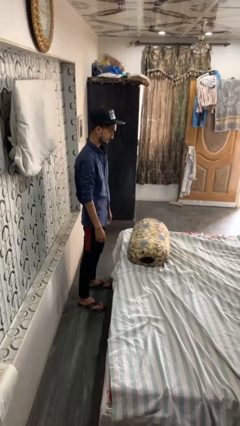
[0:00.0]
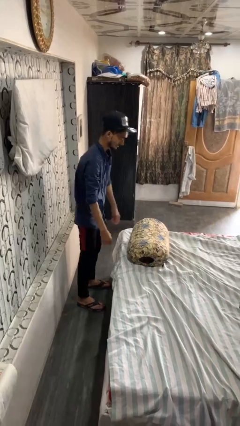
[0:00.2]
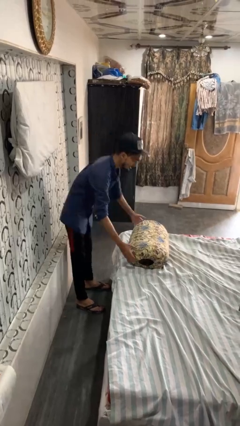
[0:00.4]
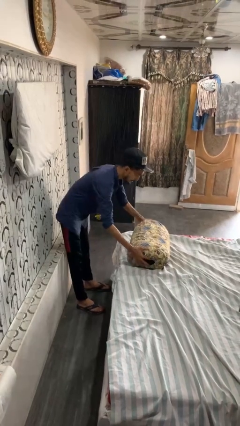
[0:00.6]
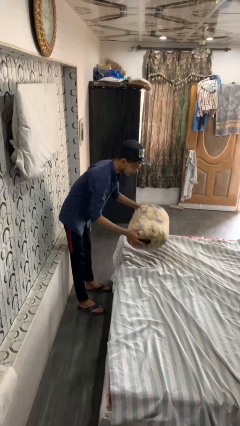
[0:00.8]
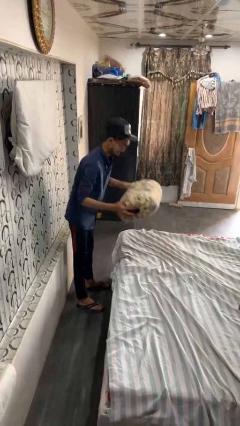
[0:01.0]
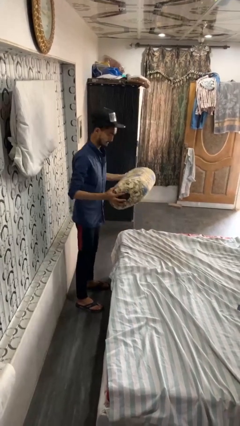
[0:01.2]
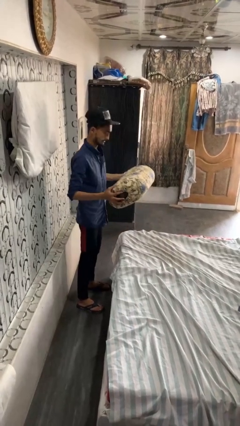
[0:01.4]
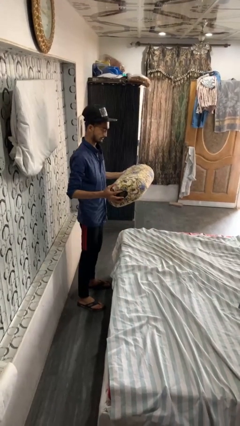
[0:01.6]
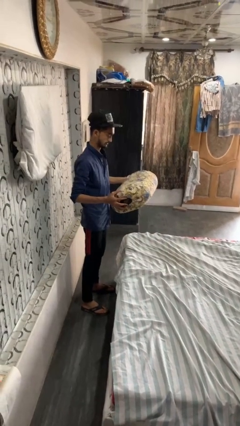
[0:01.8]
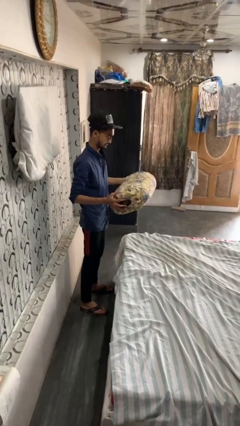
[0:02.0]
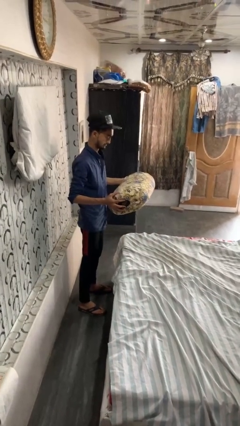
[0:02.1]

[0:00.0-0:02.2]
person picks up object from bed

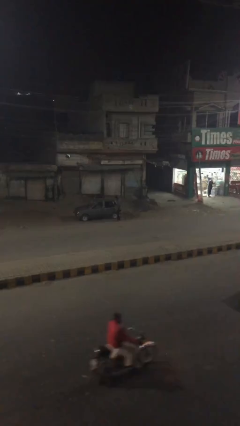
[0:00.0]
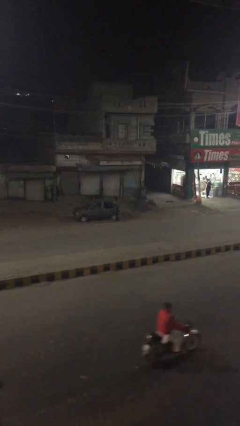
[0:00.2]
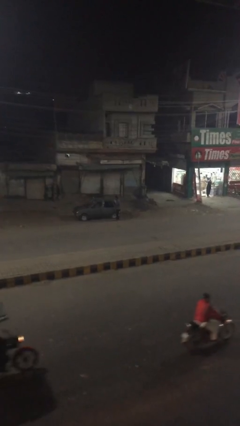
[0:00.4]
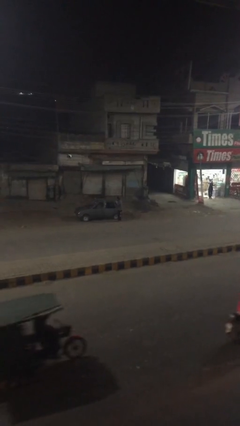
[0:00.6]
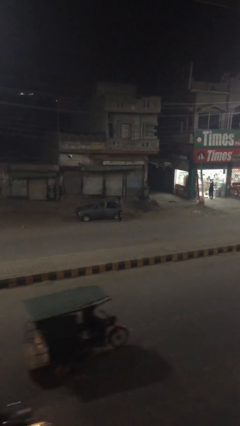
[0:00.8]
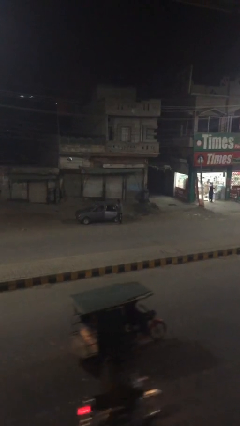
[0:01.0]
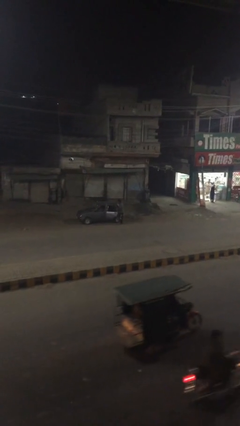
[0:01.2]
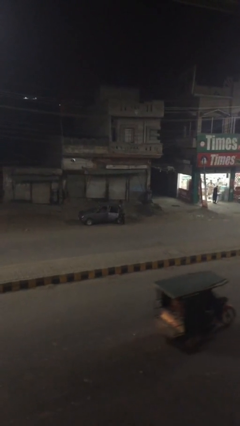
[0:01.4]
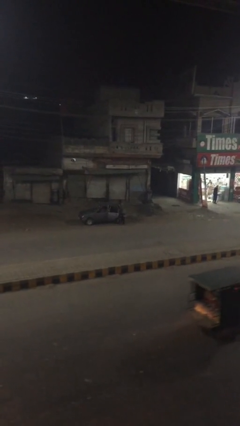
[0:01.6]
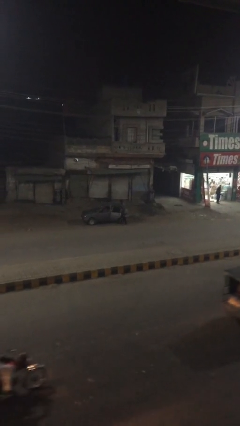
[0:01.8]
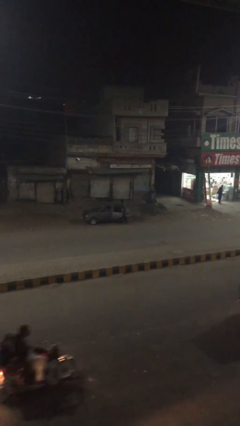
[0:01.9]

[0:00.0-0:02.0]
person opens car door

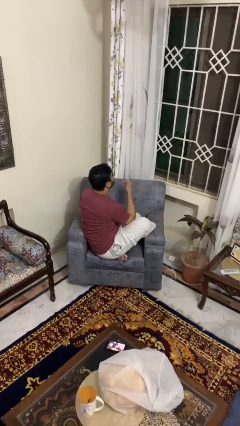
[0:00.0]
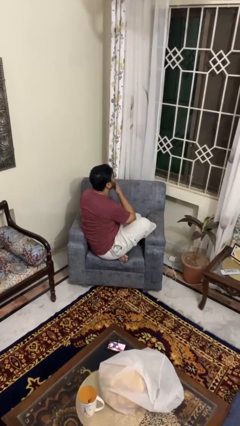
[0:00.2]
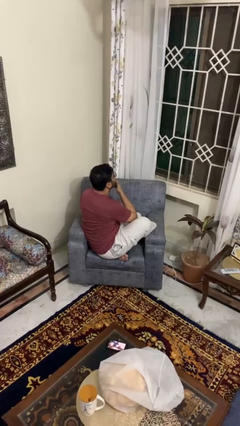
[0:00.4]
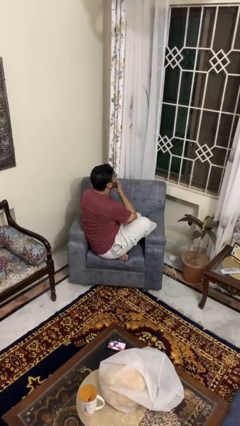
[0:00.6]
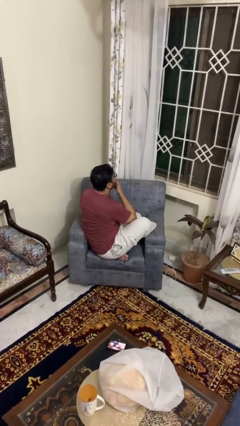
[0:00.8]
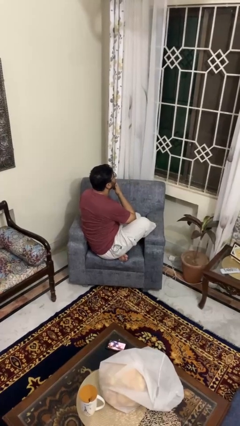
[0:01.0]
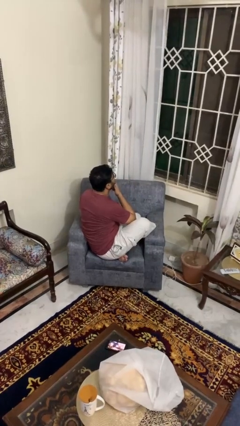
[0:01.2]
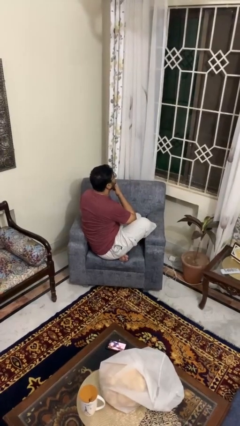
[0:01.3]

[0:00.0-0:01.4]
person strokes chin

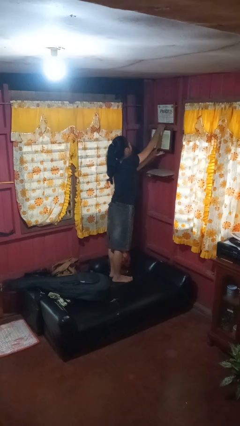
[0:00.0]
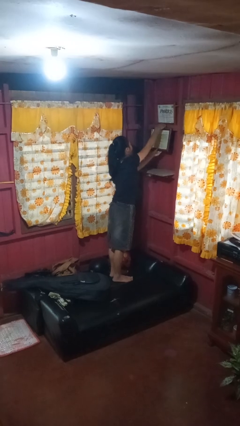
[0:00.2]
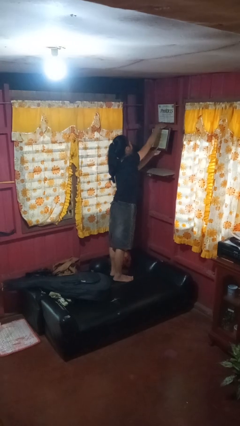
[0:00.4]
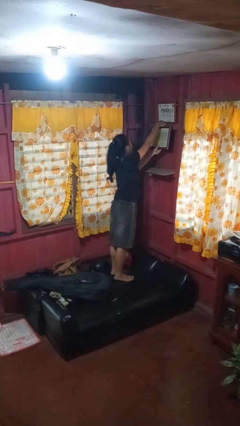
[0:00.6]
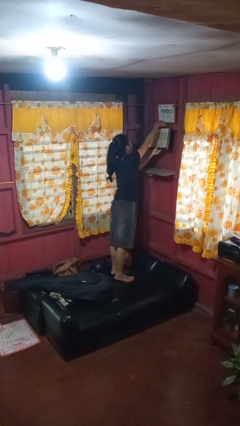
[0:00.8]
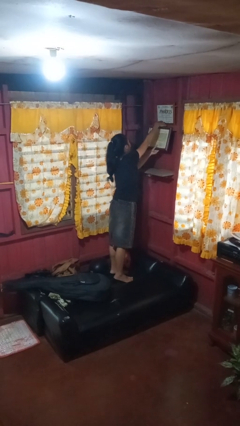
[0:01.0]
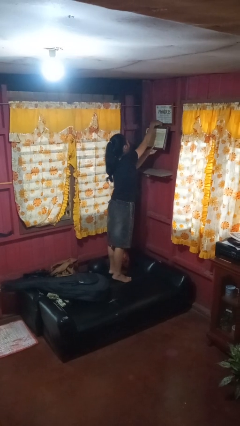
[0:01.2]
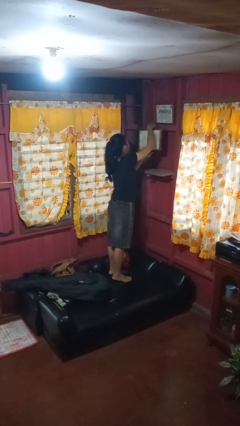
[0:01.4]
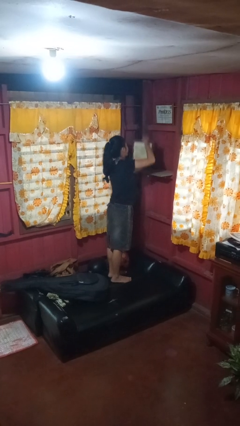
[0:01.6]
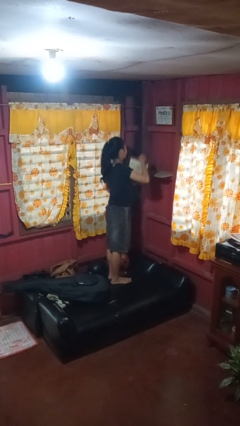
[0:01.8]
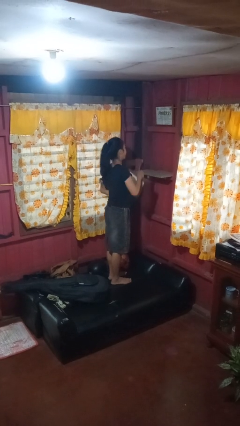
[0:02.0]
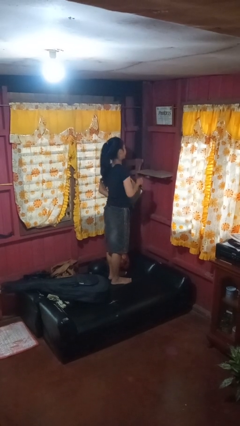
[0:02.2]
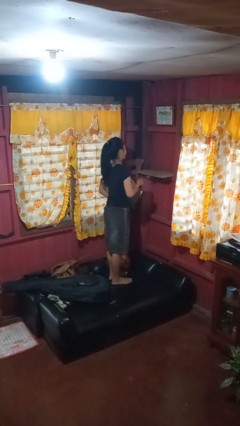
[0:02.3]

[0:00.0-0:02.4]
person takes down picture frame

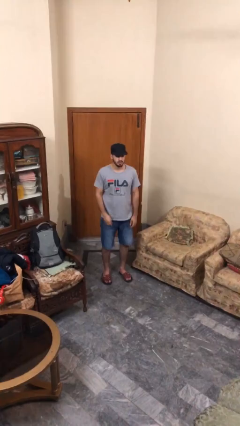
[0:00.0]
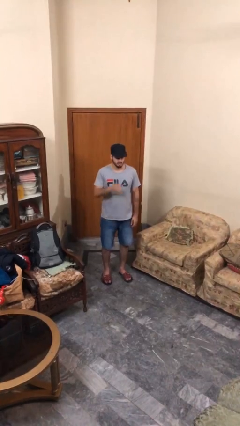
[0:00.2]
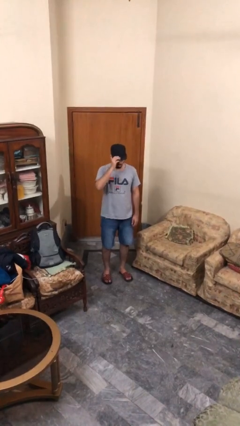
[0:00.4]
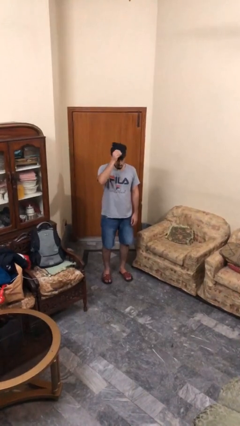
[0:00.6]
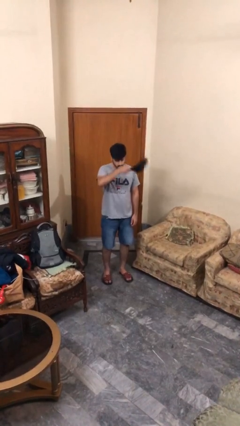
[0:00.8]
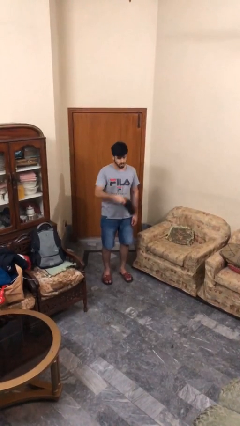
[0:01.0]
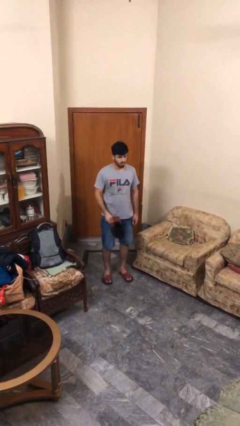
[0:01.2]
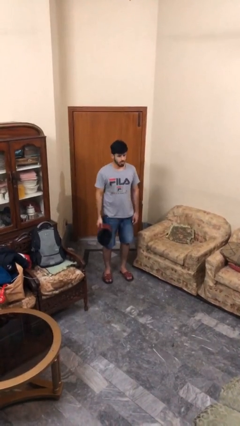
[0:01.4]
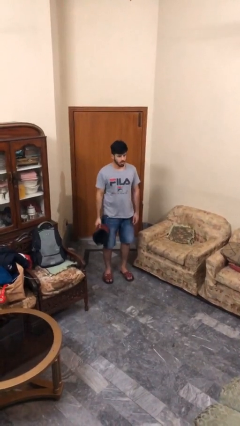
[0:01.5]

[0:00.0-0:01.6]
person takes off hat

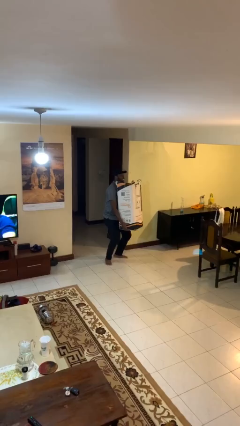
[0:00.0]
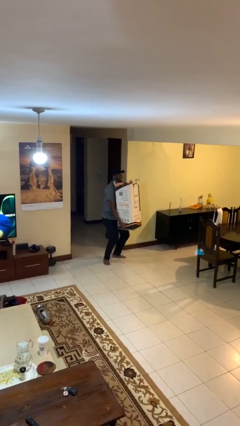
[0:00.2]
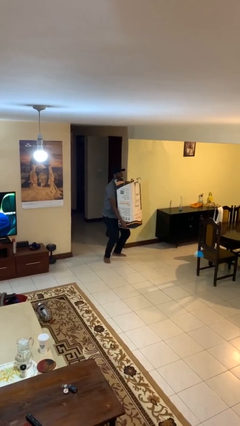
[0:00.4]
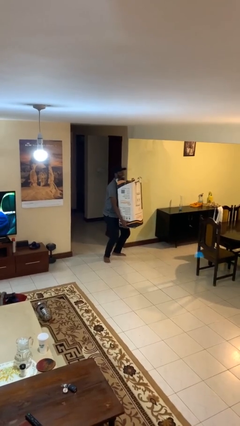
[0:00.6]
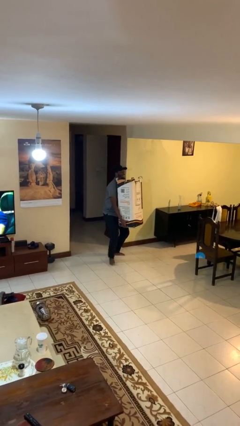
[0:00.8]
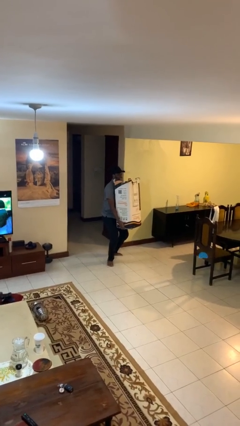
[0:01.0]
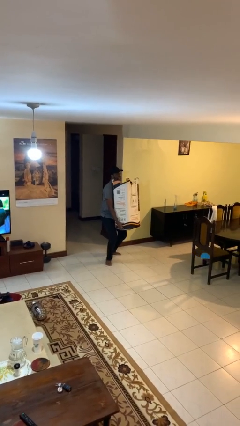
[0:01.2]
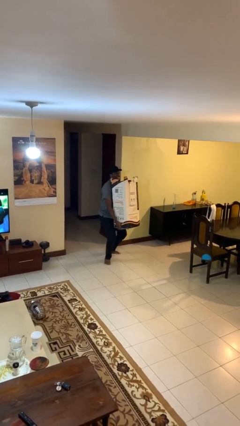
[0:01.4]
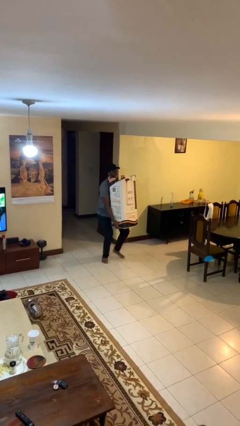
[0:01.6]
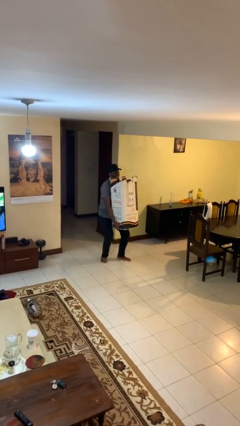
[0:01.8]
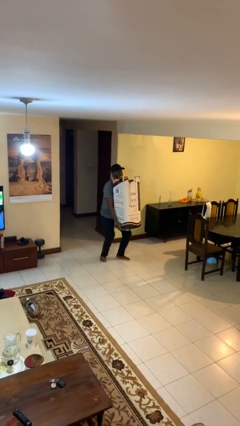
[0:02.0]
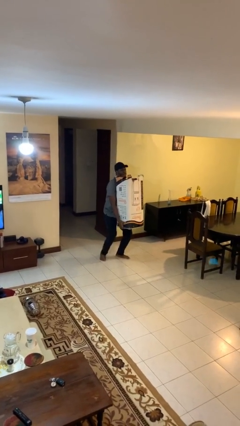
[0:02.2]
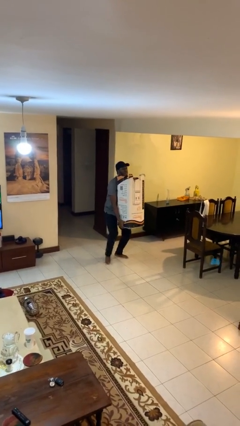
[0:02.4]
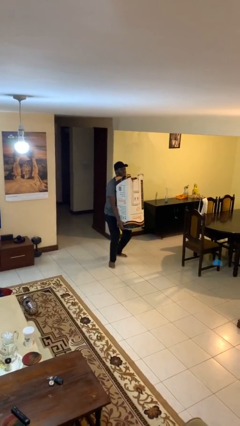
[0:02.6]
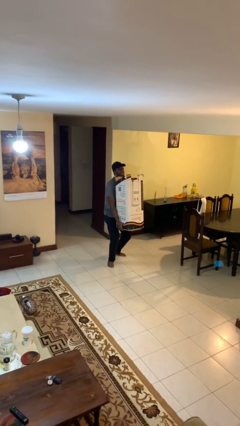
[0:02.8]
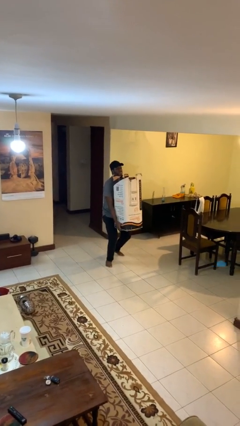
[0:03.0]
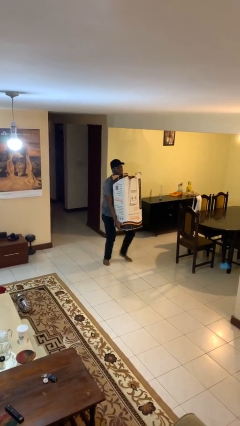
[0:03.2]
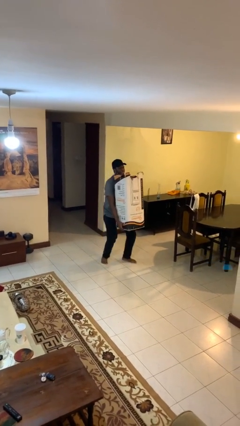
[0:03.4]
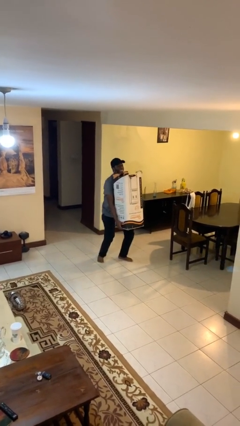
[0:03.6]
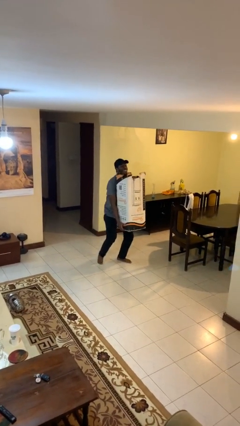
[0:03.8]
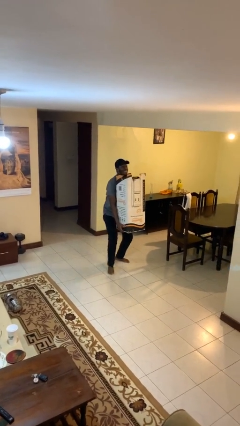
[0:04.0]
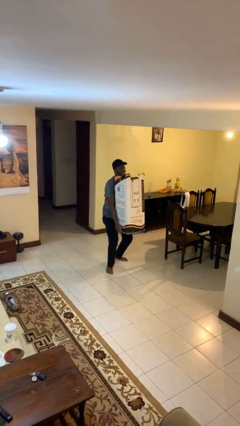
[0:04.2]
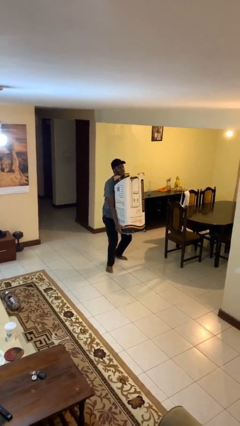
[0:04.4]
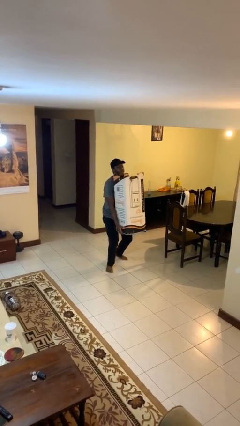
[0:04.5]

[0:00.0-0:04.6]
person carries heavy object

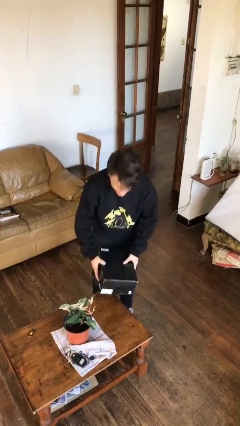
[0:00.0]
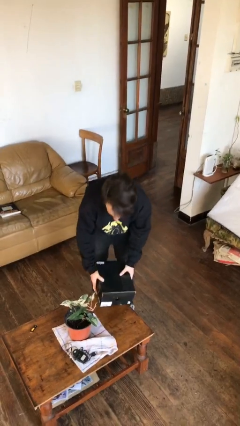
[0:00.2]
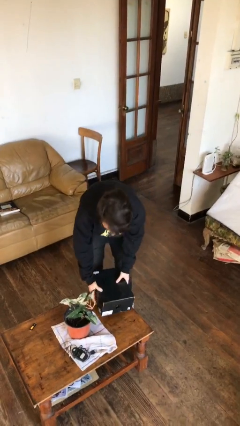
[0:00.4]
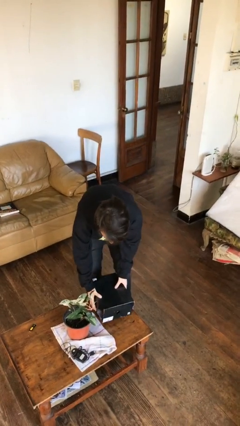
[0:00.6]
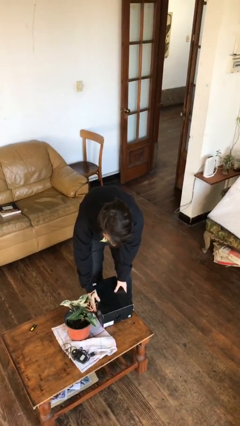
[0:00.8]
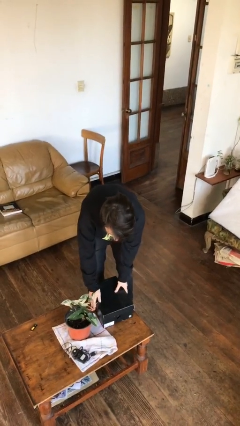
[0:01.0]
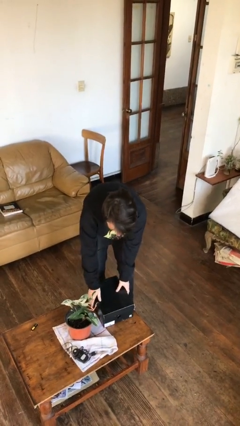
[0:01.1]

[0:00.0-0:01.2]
person puts down object on table

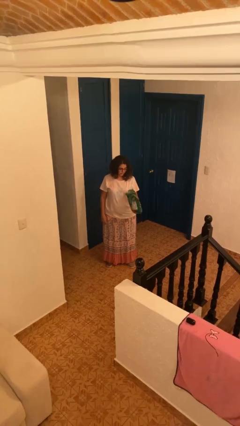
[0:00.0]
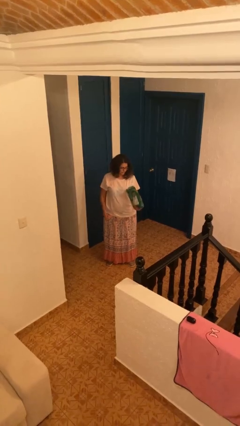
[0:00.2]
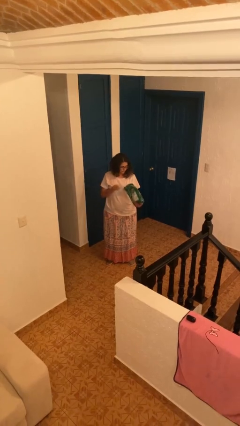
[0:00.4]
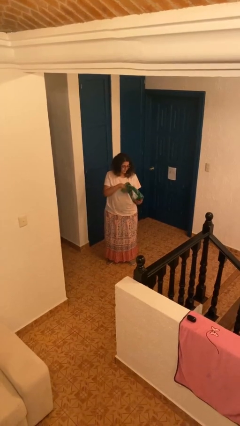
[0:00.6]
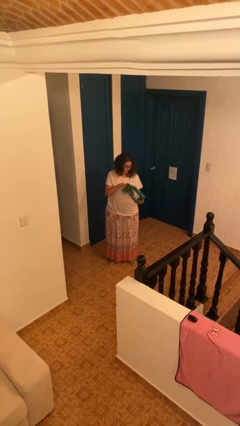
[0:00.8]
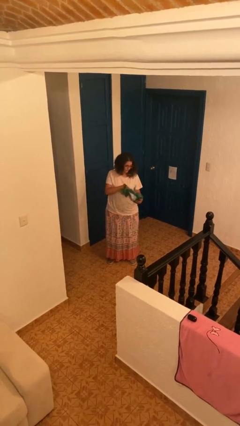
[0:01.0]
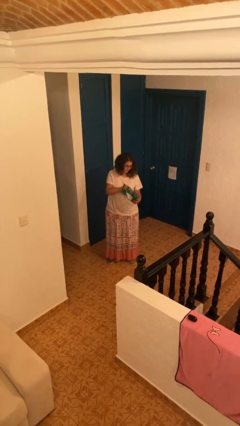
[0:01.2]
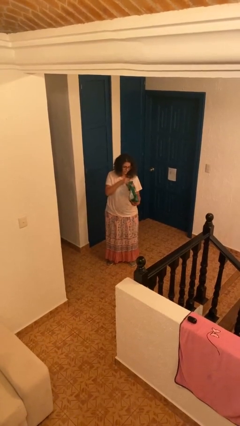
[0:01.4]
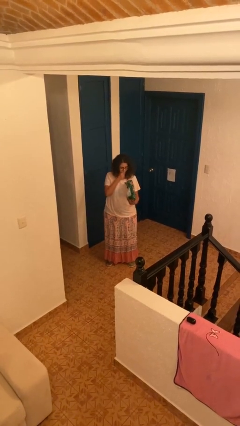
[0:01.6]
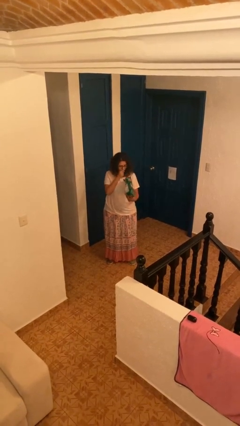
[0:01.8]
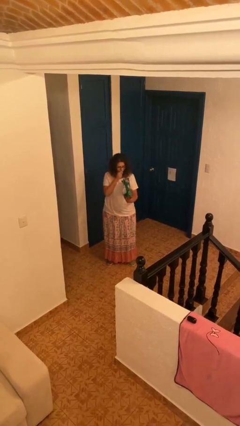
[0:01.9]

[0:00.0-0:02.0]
person eats snack from bag
